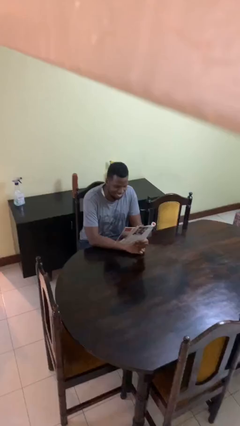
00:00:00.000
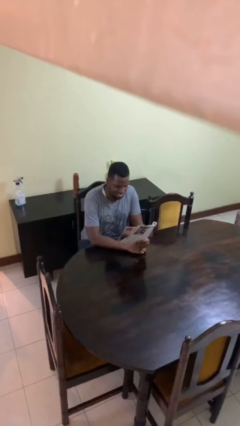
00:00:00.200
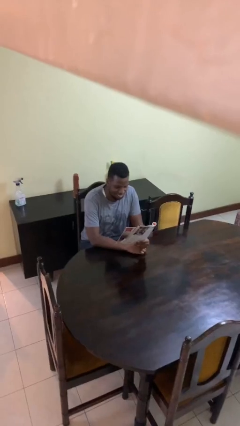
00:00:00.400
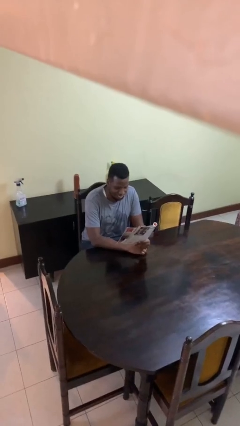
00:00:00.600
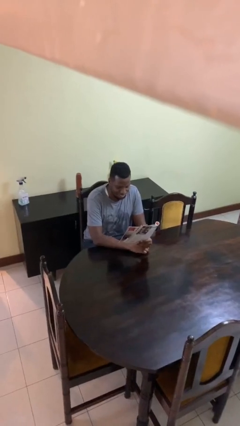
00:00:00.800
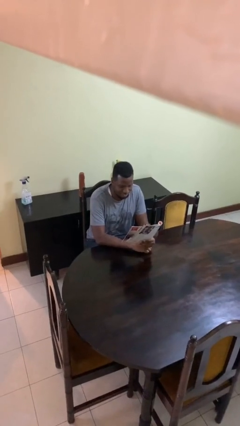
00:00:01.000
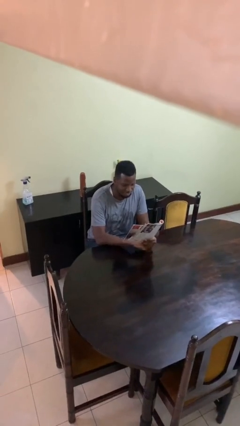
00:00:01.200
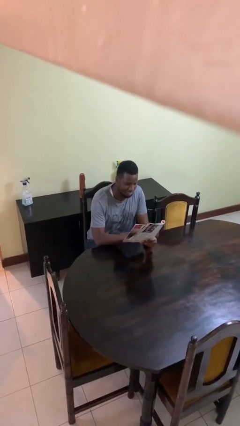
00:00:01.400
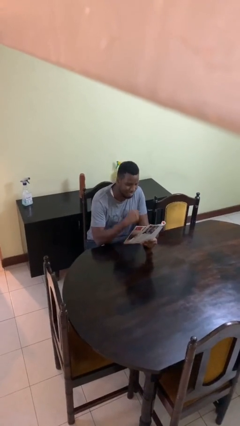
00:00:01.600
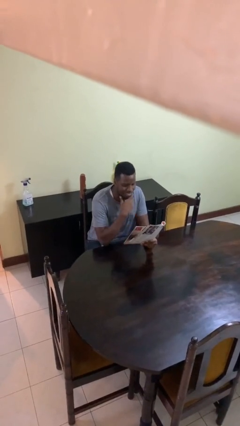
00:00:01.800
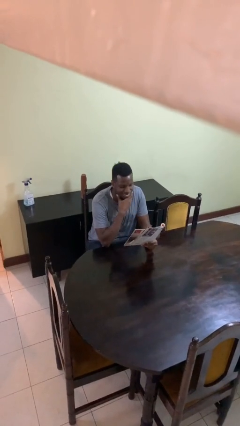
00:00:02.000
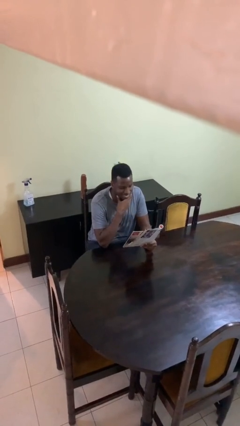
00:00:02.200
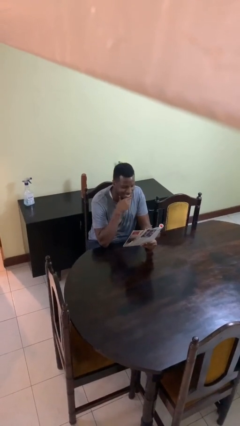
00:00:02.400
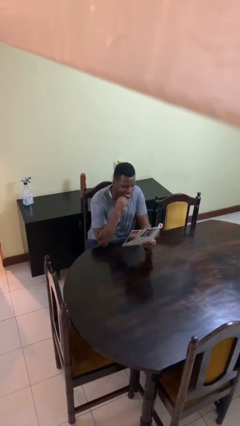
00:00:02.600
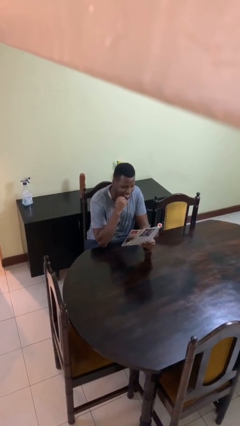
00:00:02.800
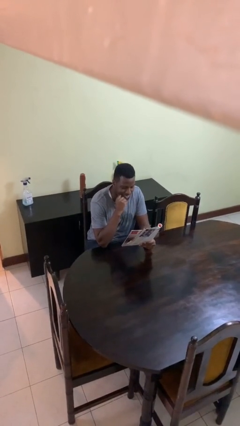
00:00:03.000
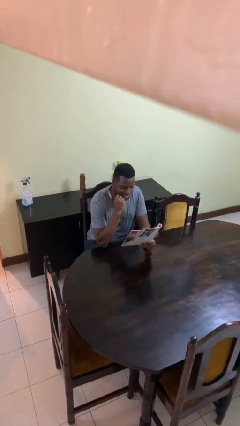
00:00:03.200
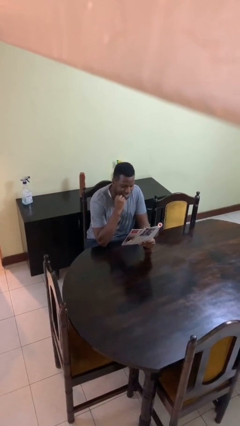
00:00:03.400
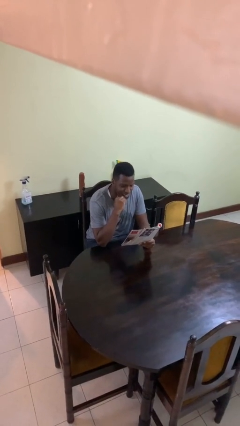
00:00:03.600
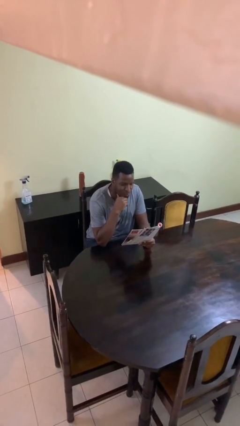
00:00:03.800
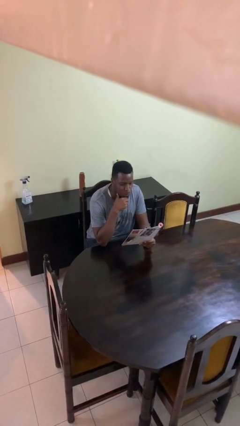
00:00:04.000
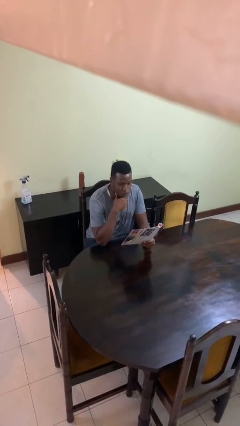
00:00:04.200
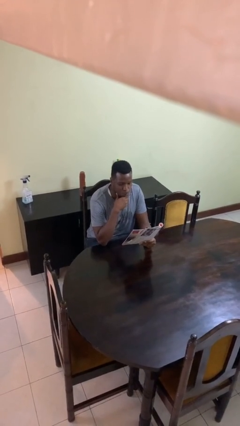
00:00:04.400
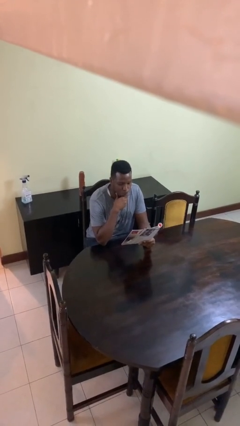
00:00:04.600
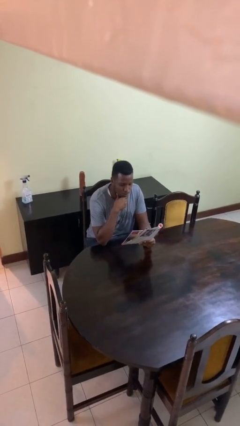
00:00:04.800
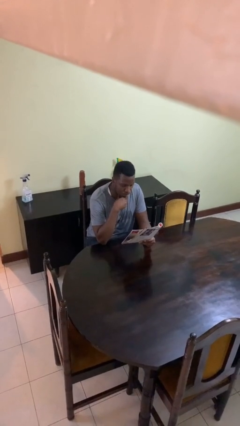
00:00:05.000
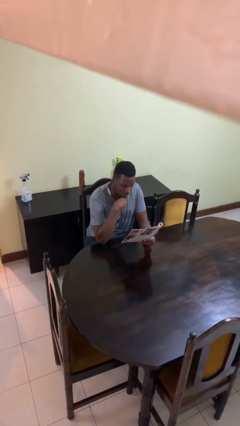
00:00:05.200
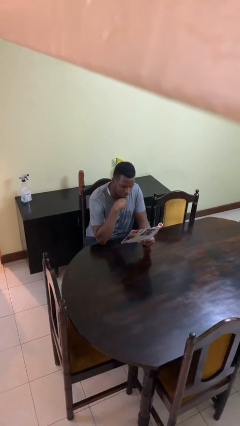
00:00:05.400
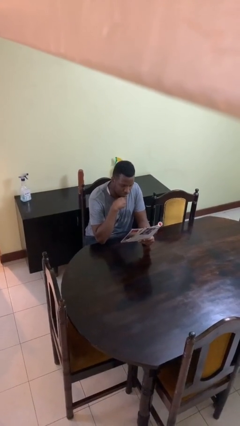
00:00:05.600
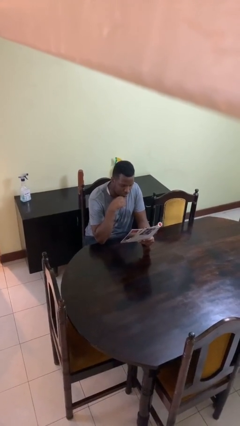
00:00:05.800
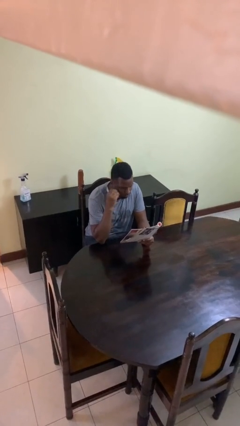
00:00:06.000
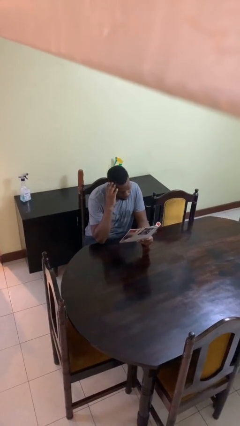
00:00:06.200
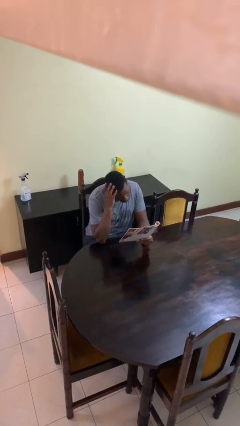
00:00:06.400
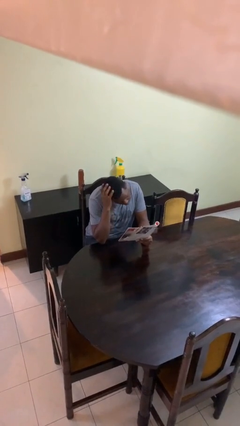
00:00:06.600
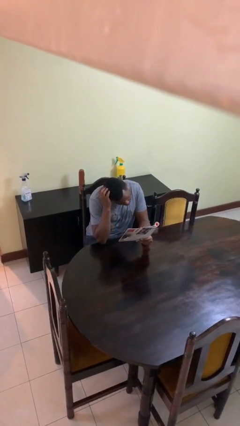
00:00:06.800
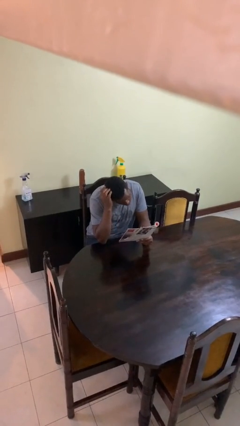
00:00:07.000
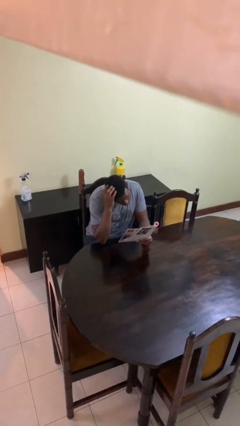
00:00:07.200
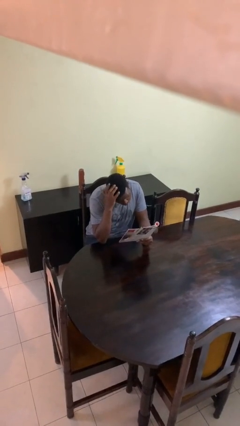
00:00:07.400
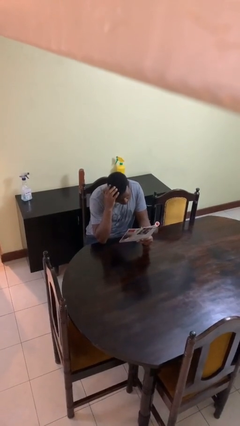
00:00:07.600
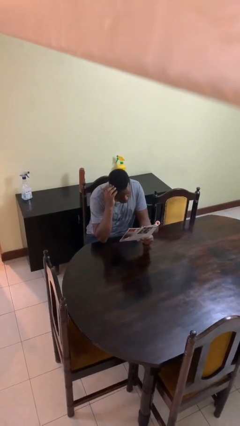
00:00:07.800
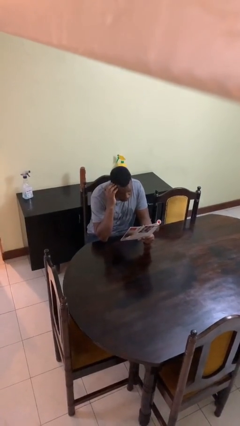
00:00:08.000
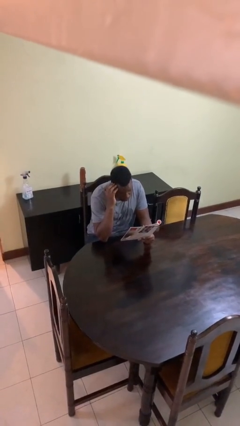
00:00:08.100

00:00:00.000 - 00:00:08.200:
person reads document

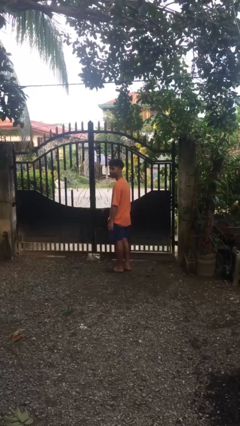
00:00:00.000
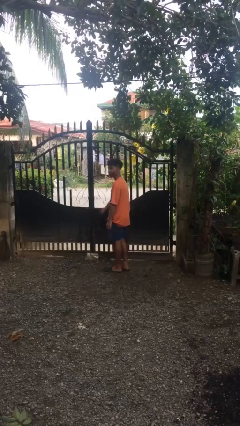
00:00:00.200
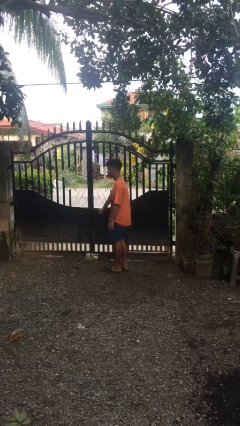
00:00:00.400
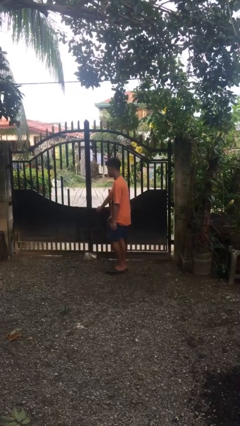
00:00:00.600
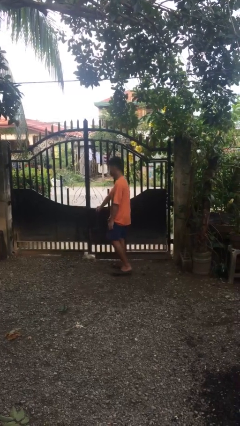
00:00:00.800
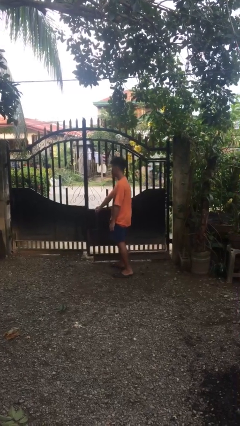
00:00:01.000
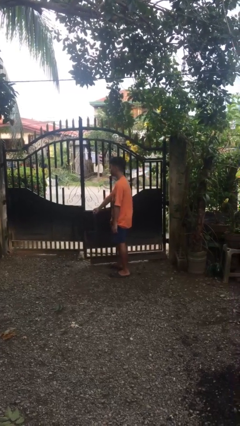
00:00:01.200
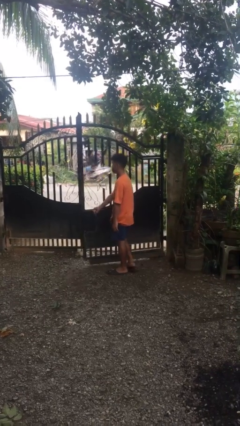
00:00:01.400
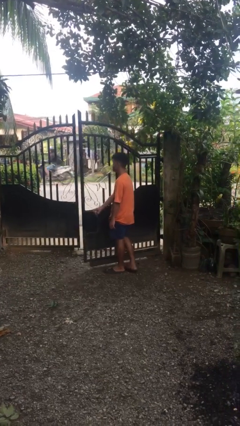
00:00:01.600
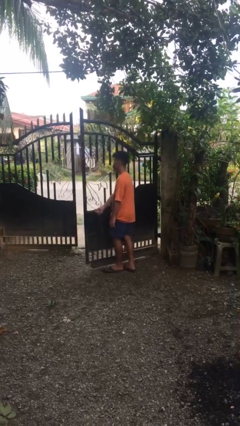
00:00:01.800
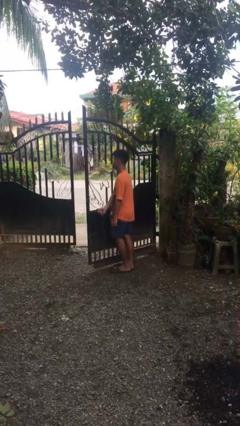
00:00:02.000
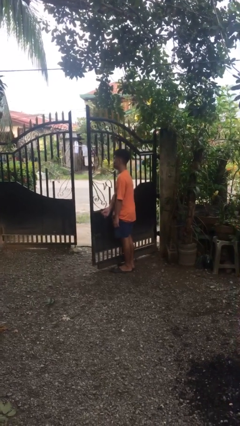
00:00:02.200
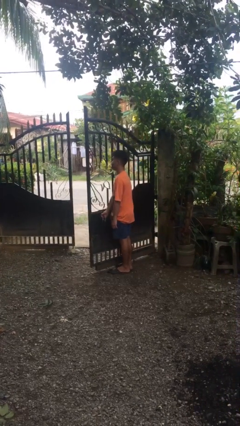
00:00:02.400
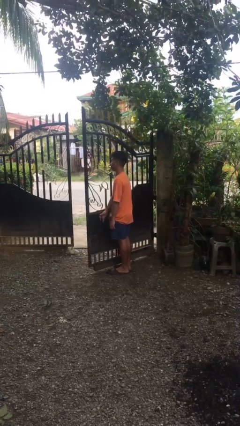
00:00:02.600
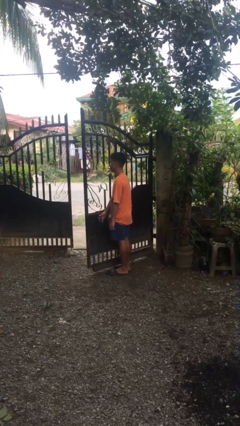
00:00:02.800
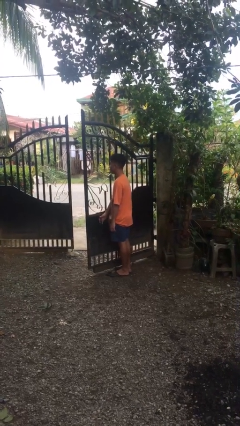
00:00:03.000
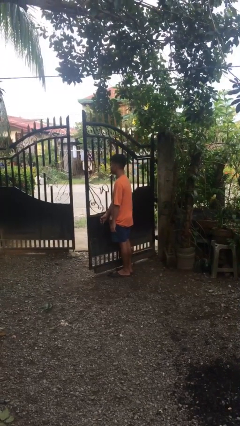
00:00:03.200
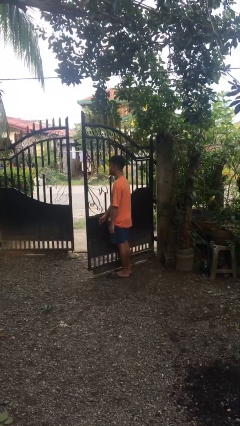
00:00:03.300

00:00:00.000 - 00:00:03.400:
person opens gate

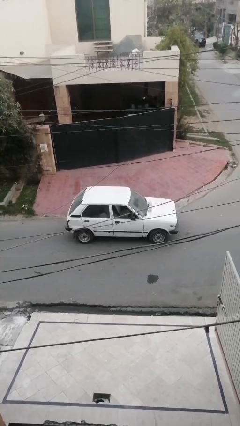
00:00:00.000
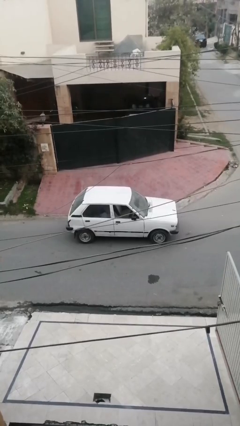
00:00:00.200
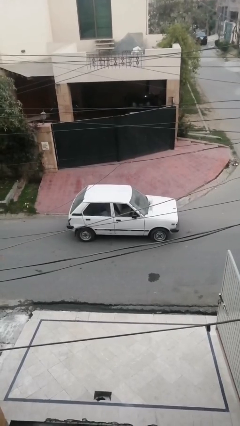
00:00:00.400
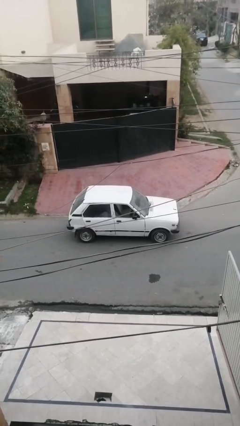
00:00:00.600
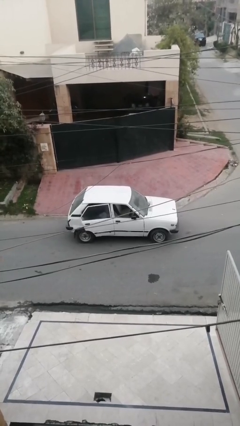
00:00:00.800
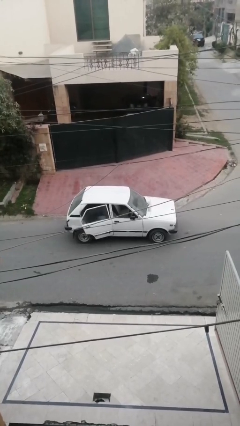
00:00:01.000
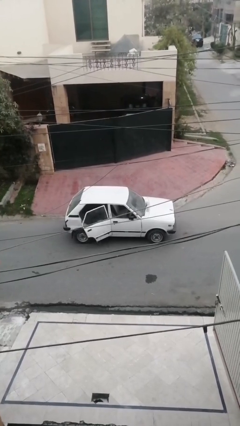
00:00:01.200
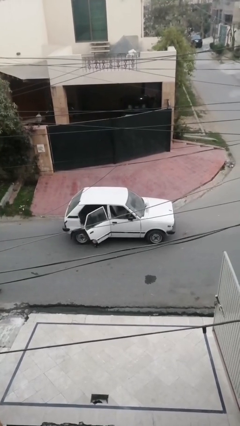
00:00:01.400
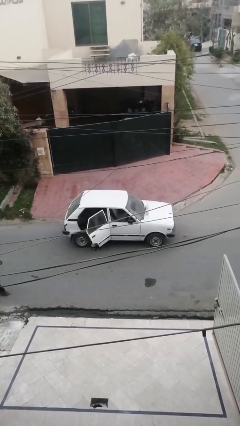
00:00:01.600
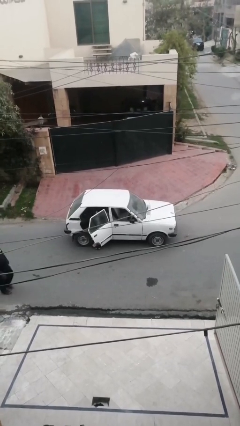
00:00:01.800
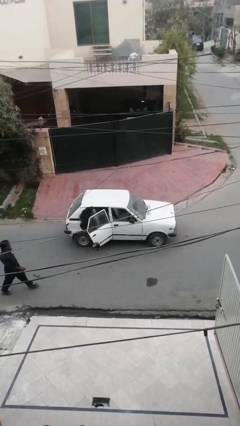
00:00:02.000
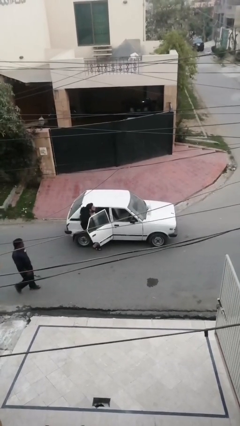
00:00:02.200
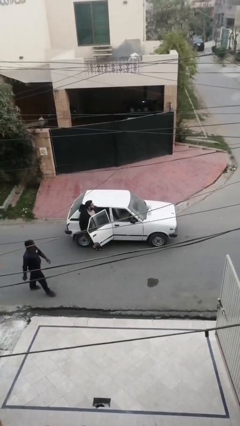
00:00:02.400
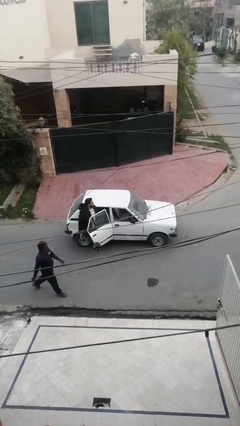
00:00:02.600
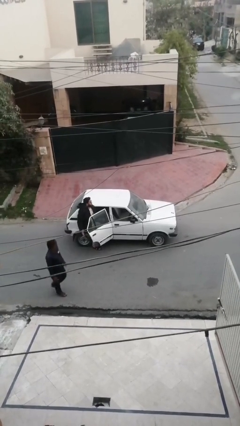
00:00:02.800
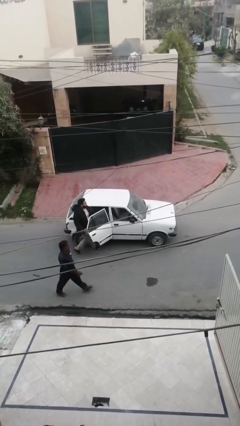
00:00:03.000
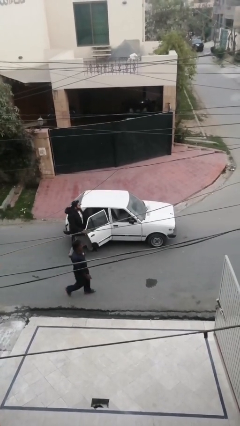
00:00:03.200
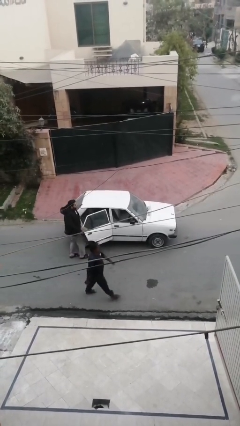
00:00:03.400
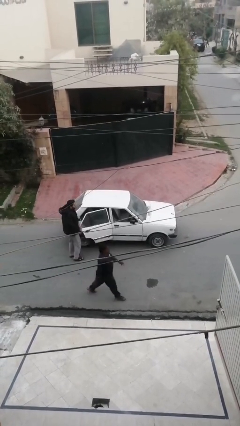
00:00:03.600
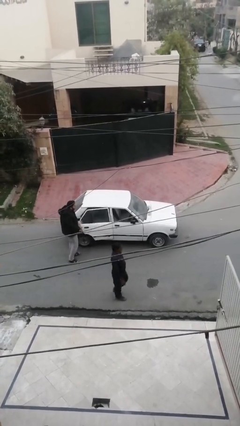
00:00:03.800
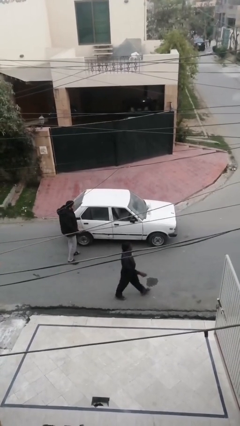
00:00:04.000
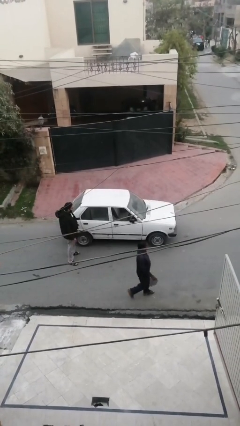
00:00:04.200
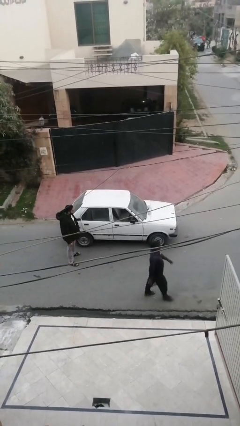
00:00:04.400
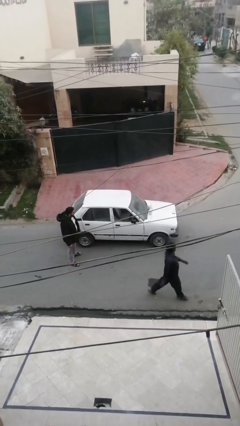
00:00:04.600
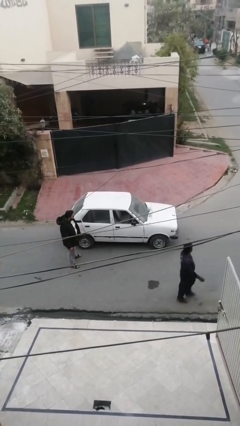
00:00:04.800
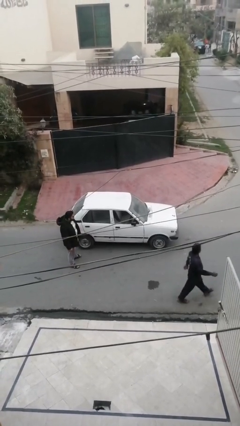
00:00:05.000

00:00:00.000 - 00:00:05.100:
car drops off person

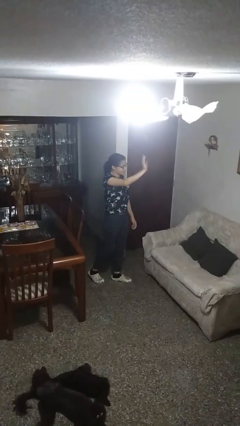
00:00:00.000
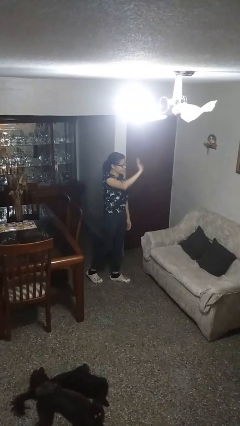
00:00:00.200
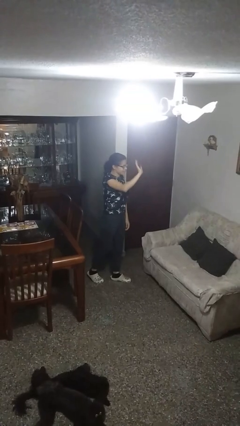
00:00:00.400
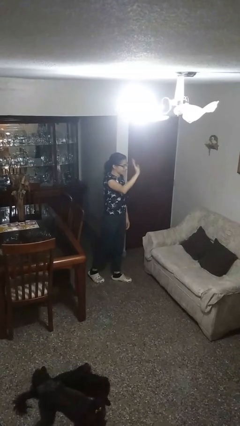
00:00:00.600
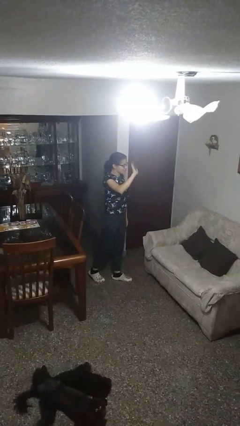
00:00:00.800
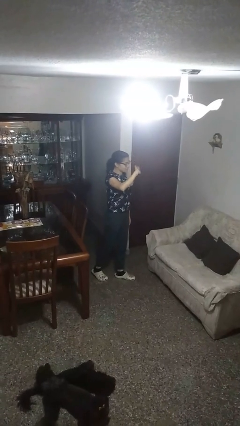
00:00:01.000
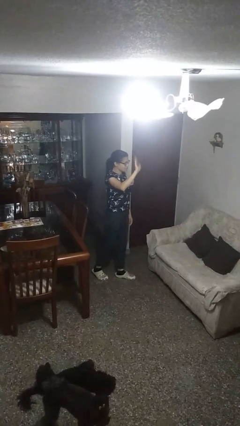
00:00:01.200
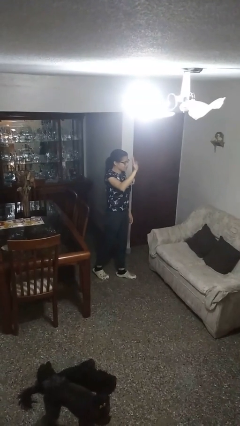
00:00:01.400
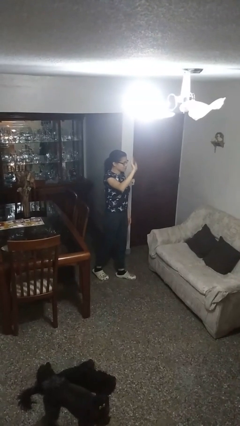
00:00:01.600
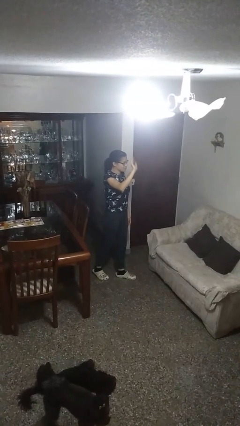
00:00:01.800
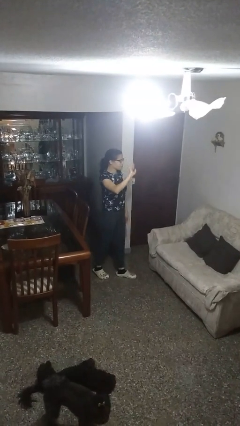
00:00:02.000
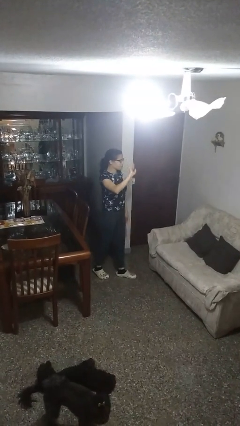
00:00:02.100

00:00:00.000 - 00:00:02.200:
person waves at person
